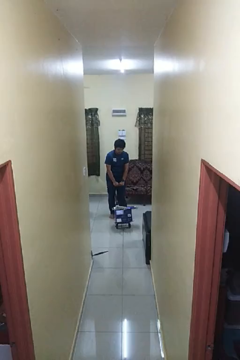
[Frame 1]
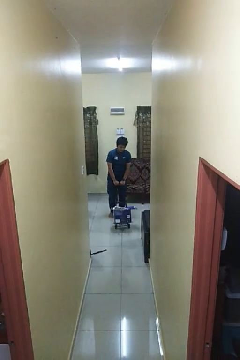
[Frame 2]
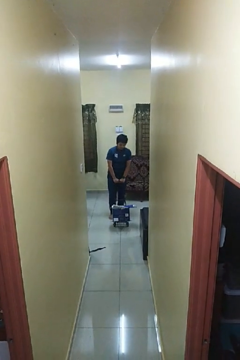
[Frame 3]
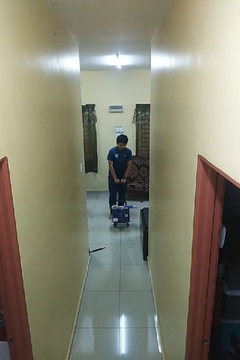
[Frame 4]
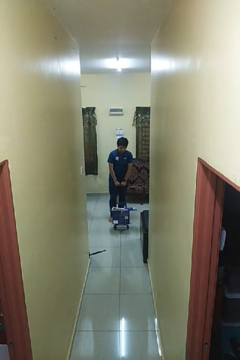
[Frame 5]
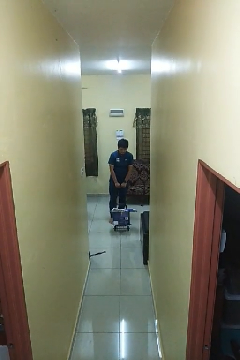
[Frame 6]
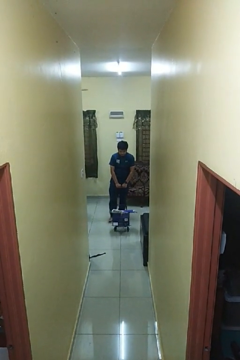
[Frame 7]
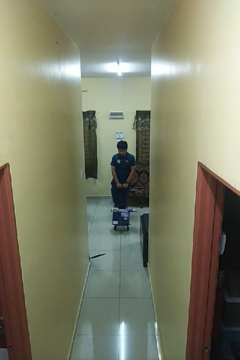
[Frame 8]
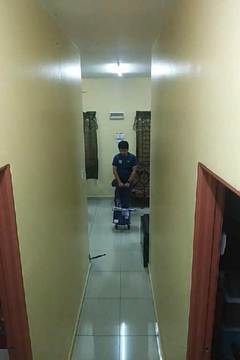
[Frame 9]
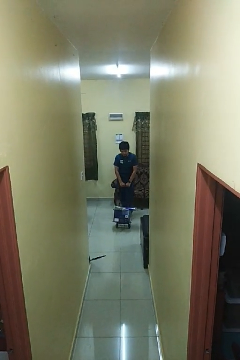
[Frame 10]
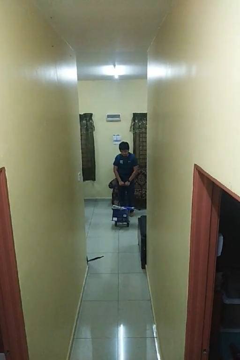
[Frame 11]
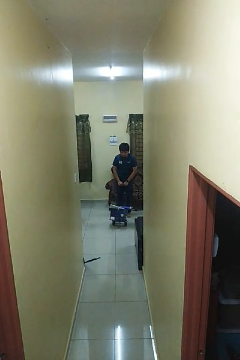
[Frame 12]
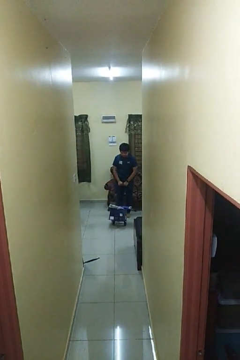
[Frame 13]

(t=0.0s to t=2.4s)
person pulls wheeled cart

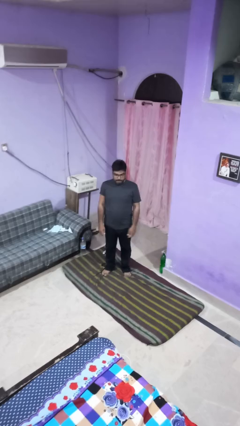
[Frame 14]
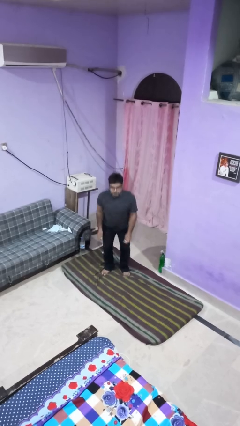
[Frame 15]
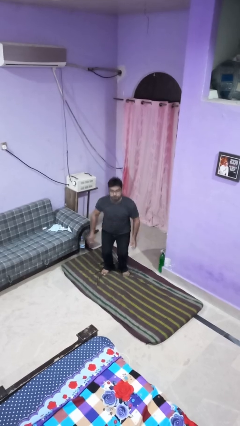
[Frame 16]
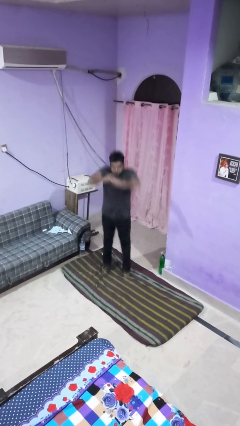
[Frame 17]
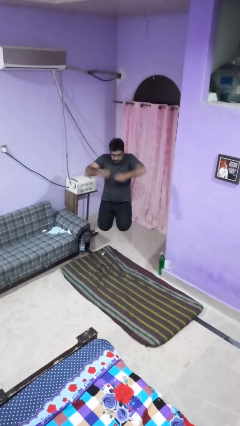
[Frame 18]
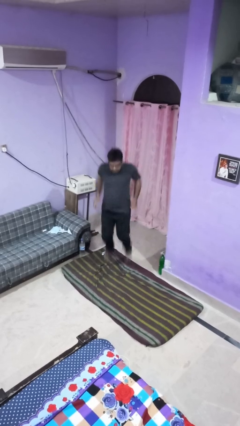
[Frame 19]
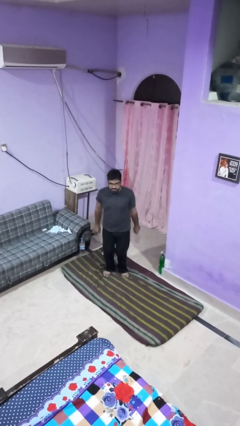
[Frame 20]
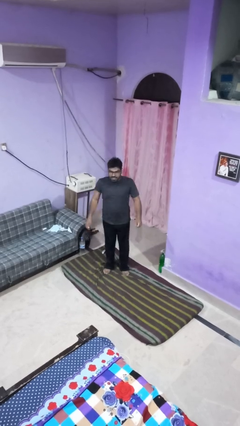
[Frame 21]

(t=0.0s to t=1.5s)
person jumps

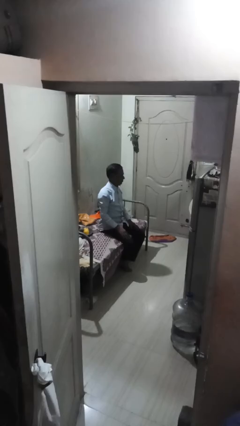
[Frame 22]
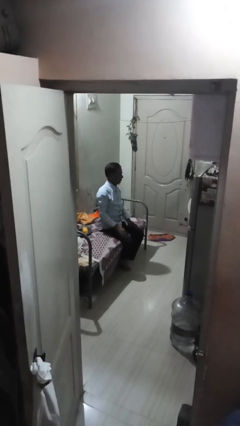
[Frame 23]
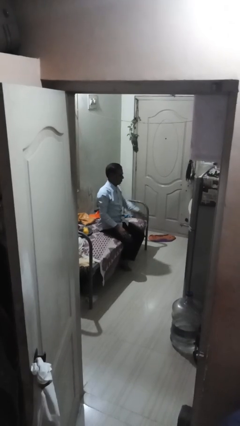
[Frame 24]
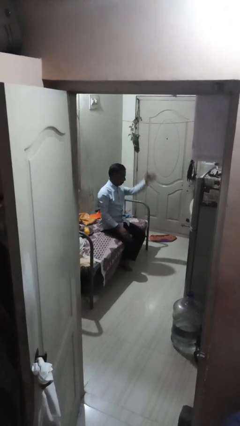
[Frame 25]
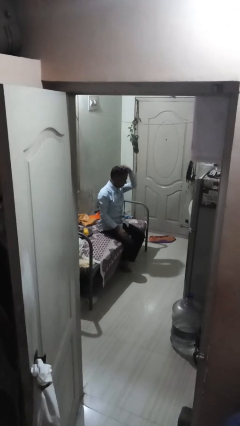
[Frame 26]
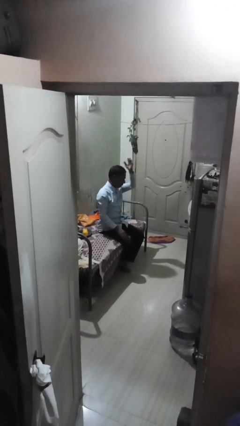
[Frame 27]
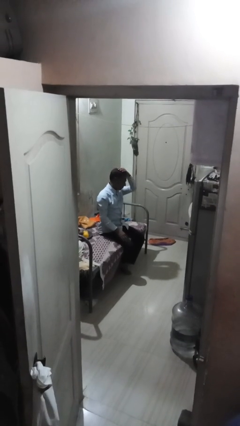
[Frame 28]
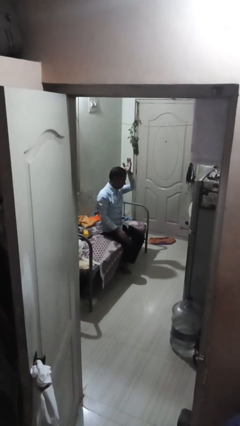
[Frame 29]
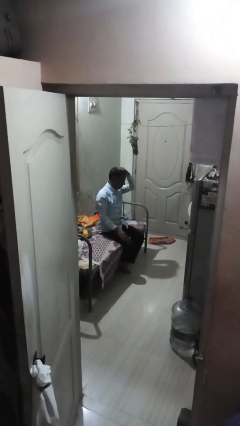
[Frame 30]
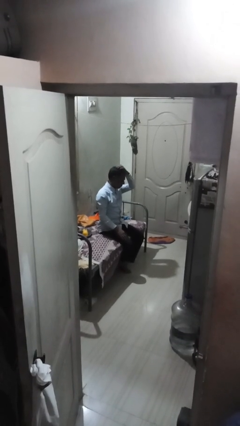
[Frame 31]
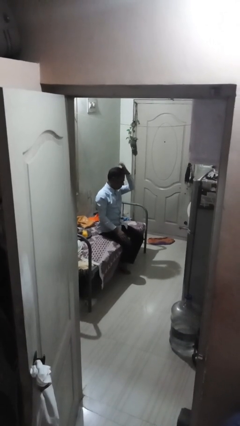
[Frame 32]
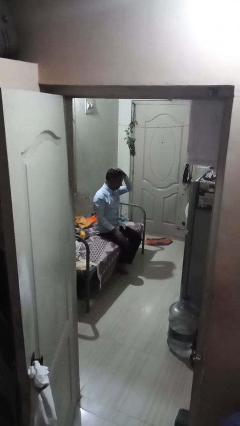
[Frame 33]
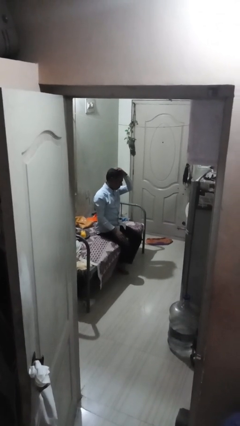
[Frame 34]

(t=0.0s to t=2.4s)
person pats head

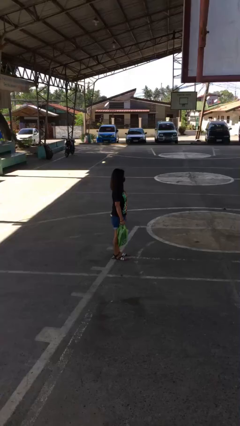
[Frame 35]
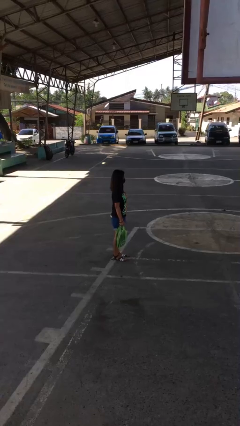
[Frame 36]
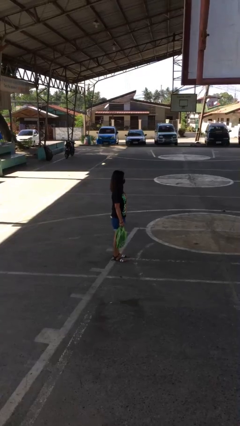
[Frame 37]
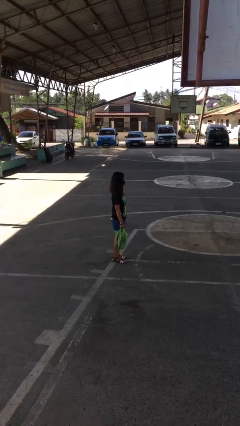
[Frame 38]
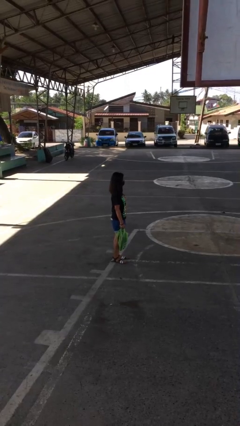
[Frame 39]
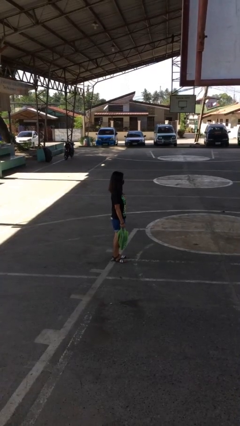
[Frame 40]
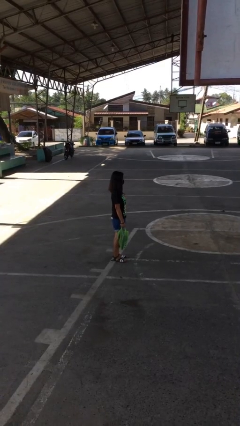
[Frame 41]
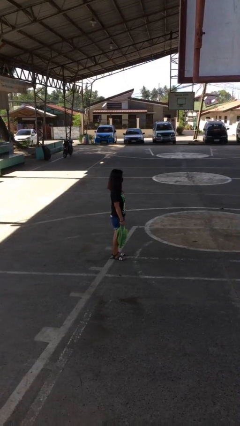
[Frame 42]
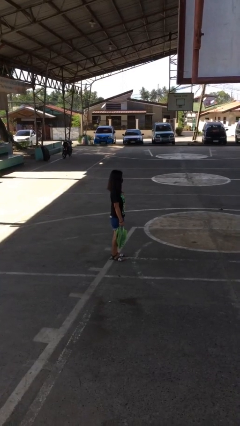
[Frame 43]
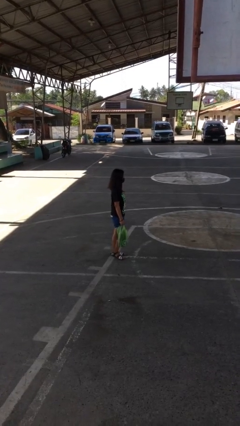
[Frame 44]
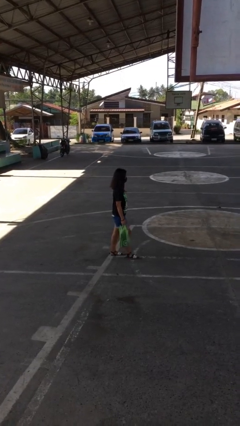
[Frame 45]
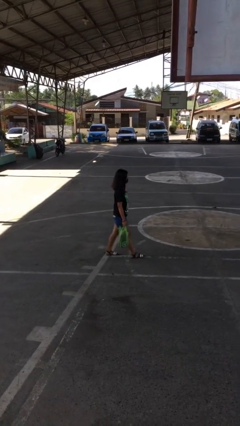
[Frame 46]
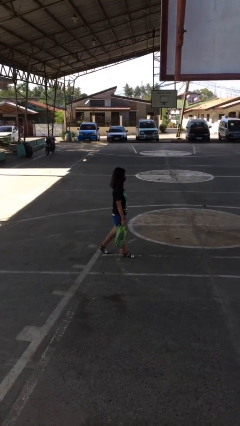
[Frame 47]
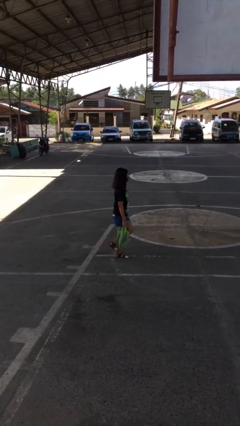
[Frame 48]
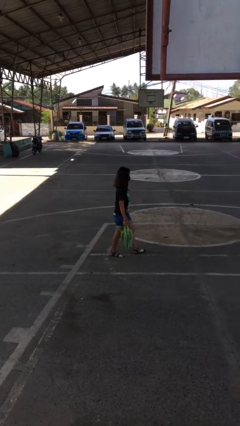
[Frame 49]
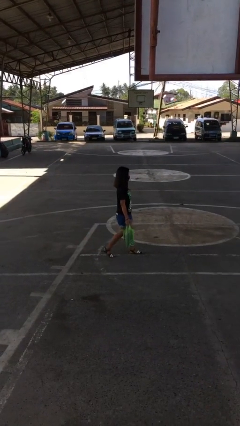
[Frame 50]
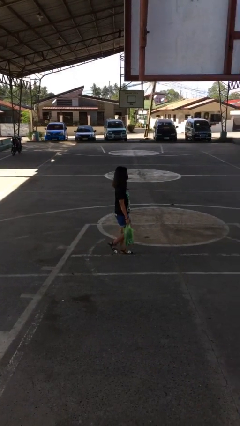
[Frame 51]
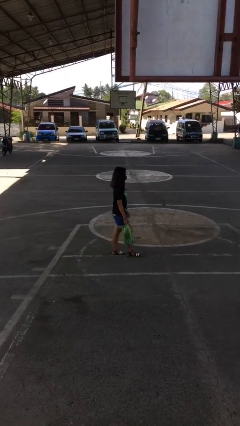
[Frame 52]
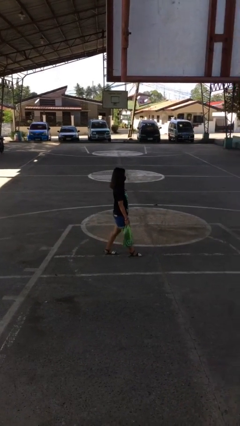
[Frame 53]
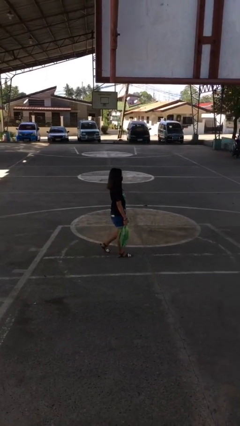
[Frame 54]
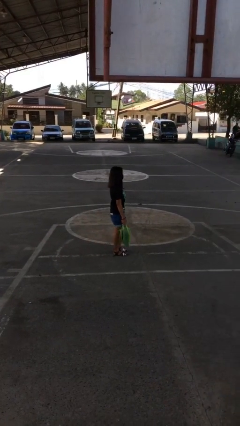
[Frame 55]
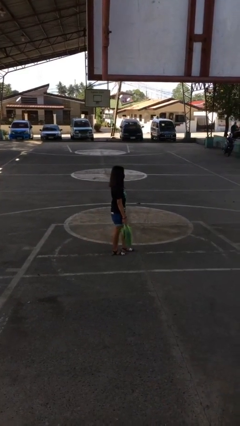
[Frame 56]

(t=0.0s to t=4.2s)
person carries groceries

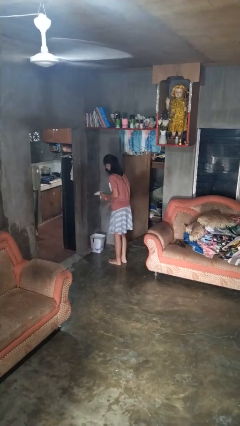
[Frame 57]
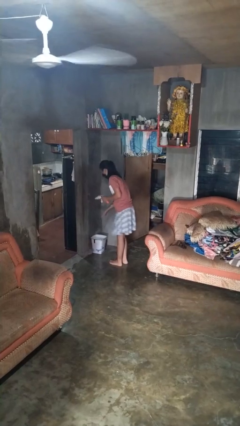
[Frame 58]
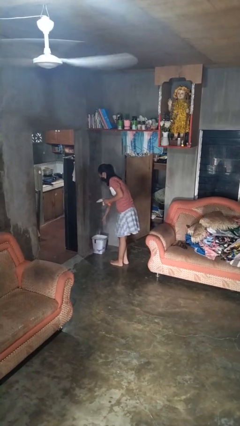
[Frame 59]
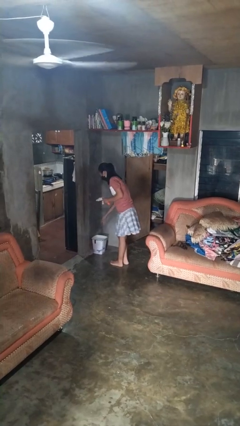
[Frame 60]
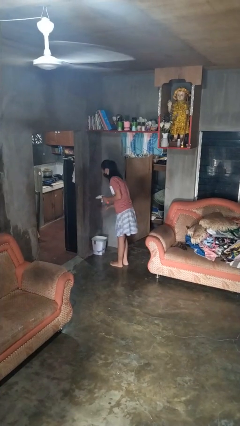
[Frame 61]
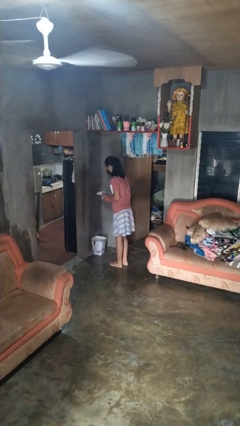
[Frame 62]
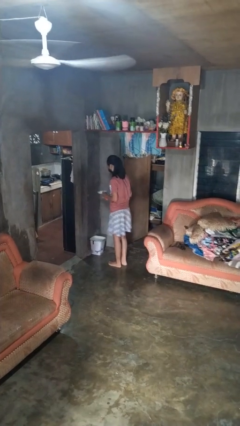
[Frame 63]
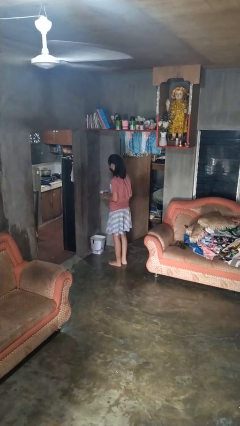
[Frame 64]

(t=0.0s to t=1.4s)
person discards trash

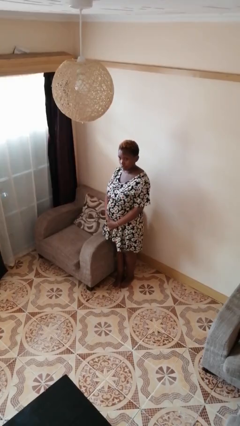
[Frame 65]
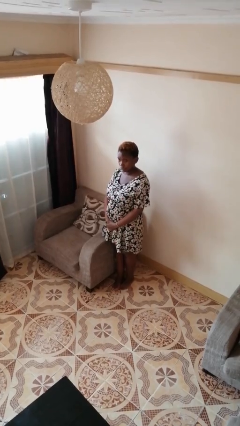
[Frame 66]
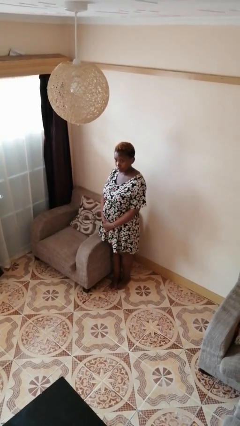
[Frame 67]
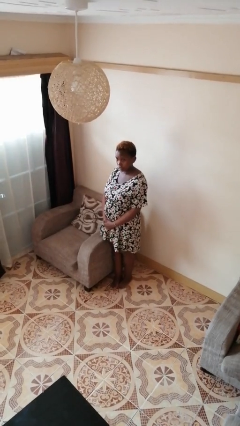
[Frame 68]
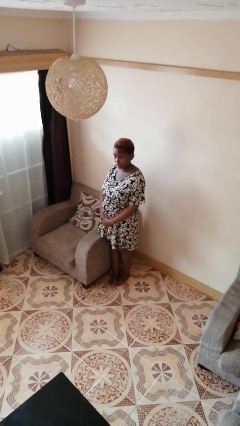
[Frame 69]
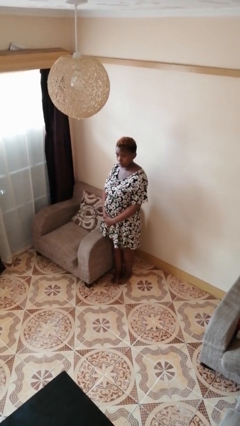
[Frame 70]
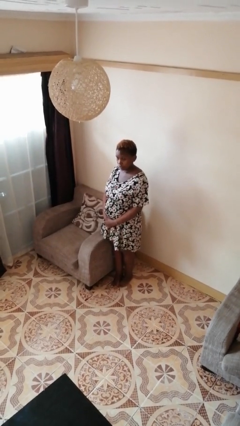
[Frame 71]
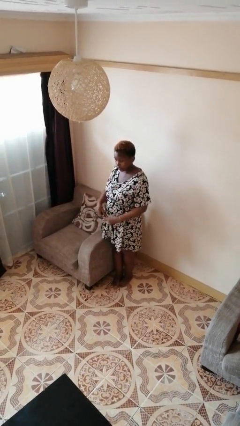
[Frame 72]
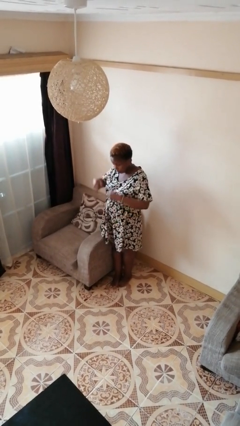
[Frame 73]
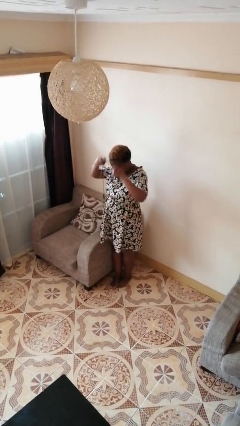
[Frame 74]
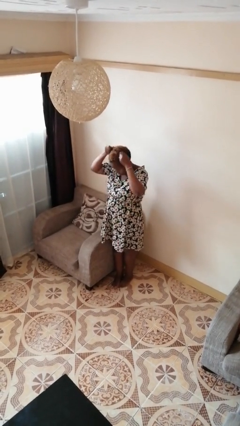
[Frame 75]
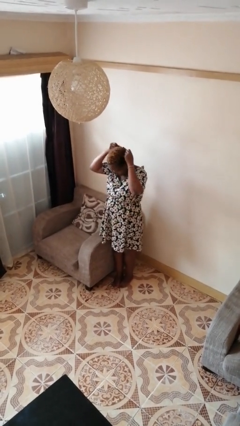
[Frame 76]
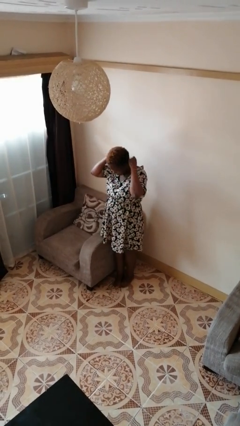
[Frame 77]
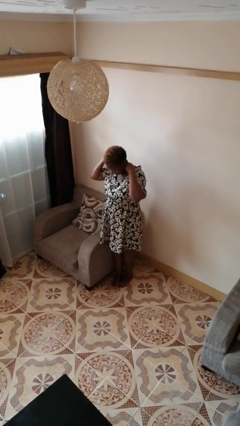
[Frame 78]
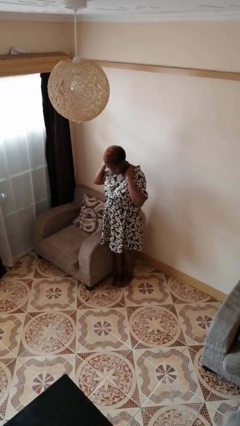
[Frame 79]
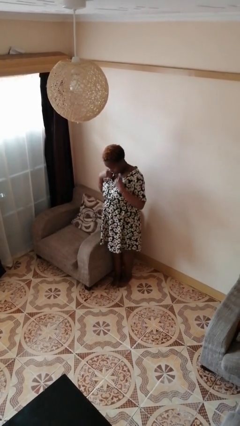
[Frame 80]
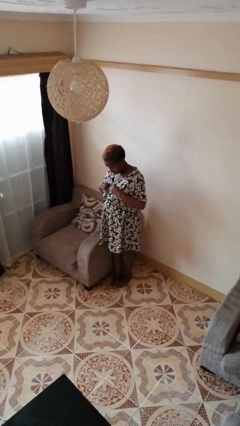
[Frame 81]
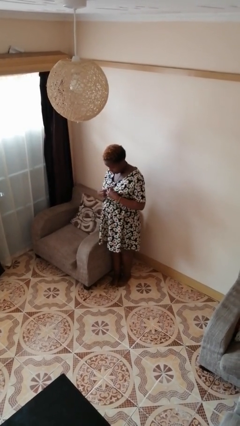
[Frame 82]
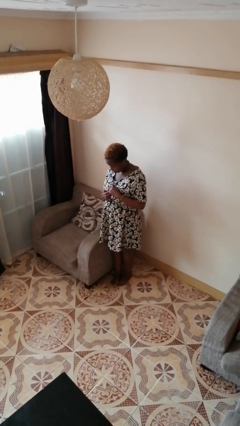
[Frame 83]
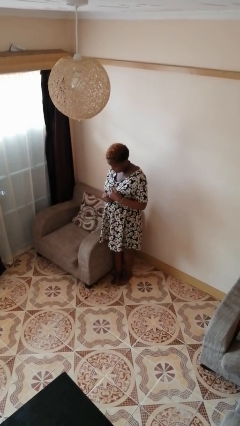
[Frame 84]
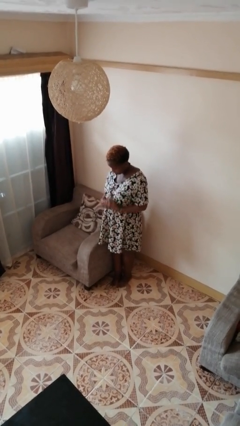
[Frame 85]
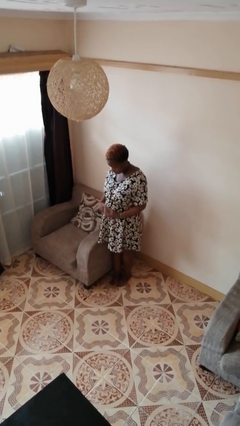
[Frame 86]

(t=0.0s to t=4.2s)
person puts on necklace

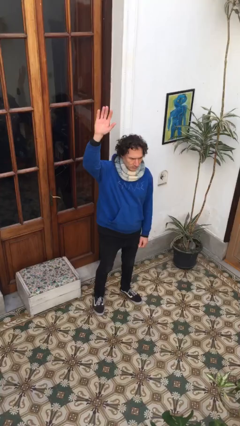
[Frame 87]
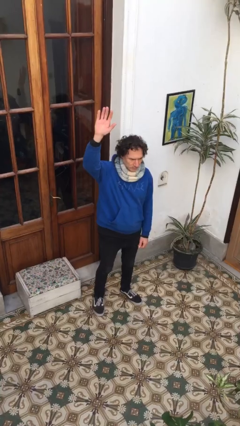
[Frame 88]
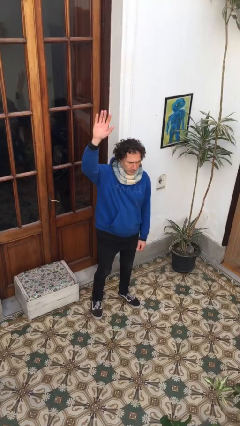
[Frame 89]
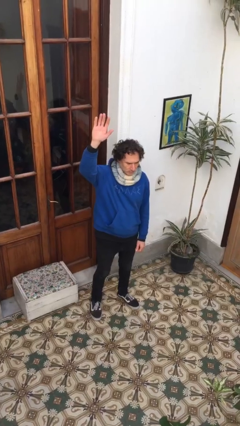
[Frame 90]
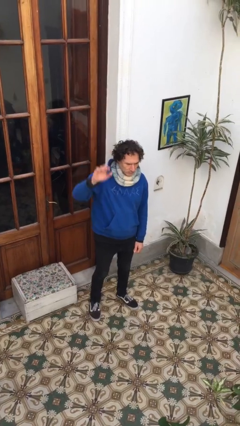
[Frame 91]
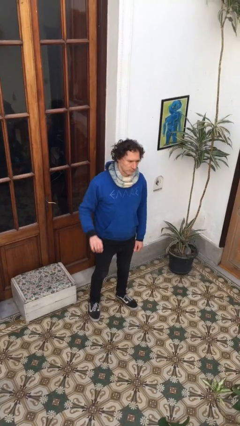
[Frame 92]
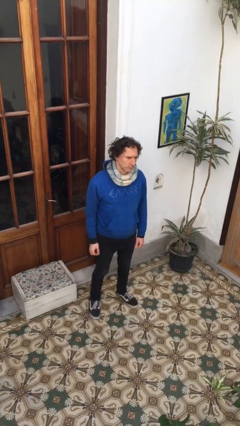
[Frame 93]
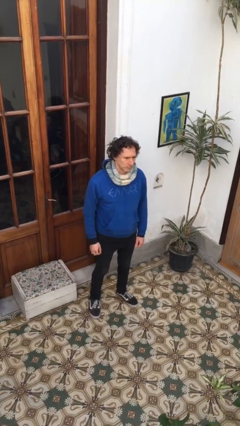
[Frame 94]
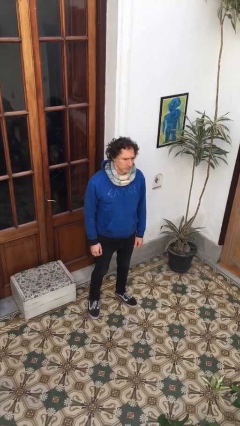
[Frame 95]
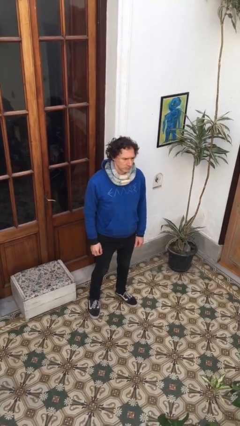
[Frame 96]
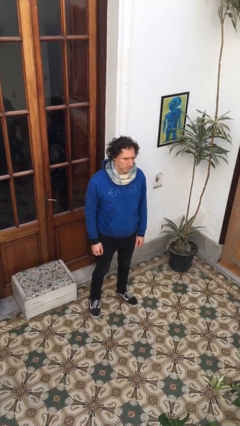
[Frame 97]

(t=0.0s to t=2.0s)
person gestures lower hand
